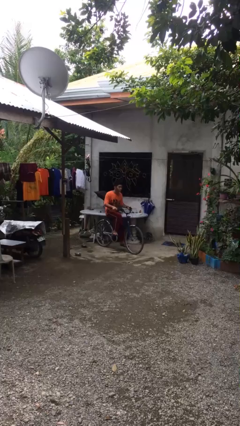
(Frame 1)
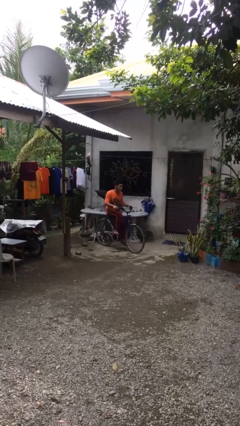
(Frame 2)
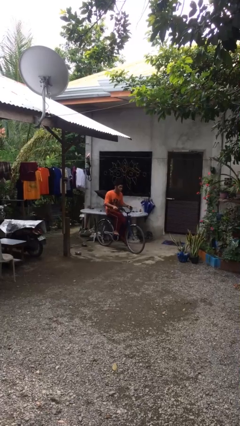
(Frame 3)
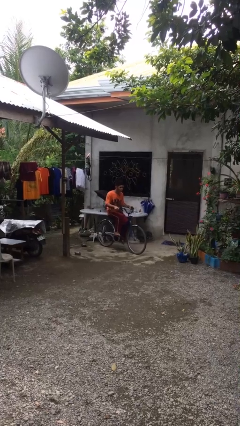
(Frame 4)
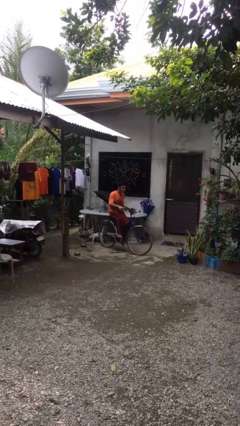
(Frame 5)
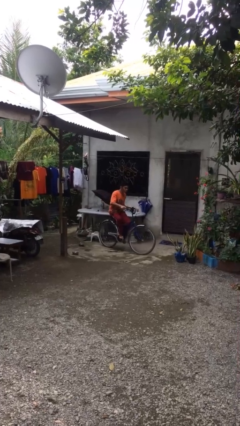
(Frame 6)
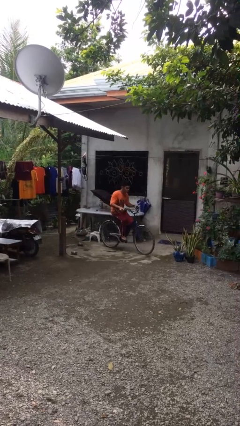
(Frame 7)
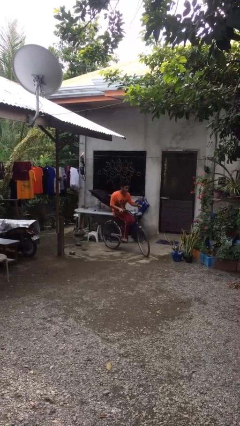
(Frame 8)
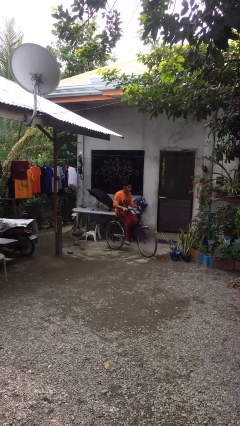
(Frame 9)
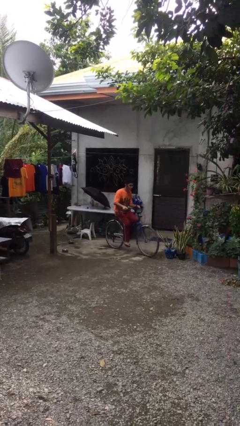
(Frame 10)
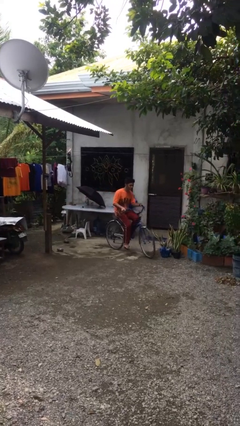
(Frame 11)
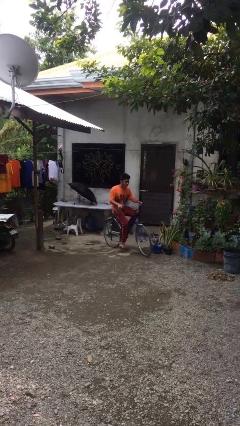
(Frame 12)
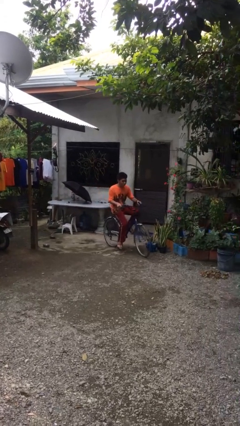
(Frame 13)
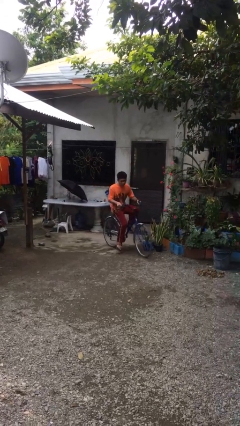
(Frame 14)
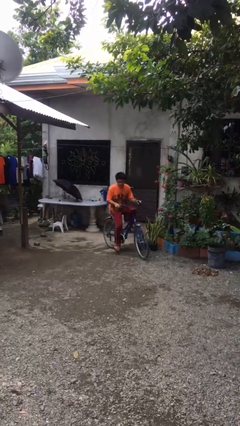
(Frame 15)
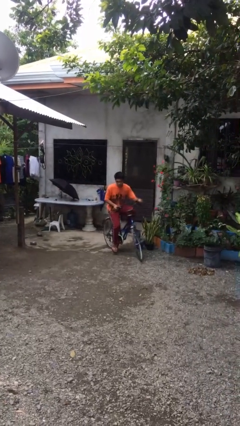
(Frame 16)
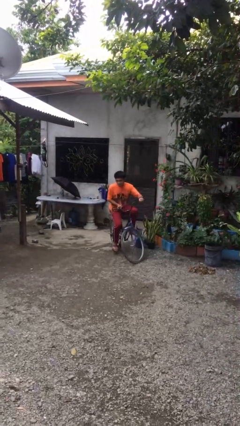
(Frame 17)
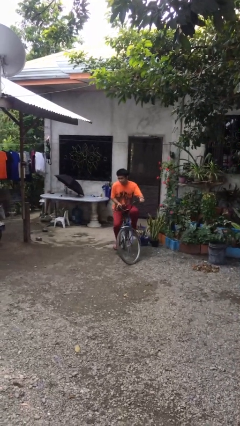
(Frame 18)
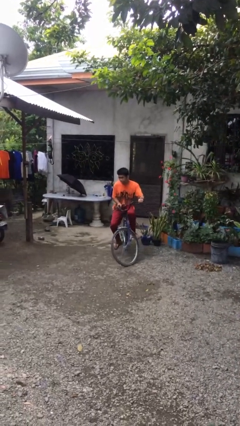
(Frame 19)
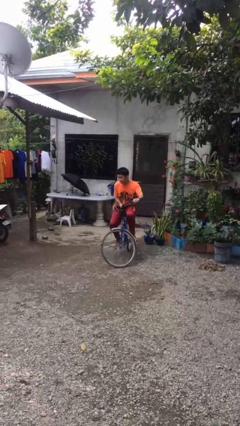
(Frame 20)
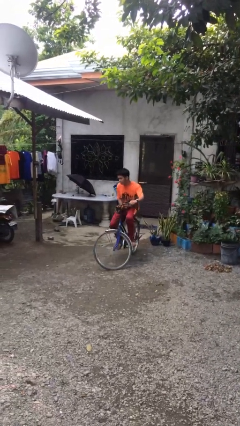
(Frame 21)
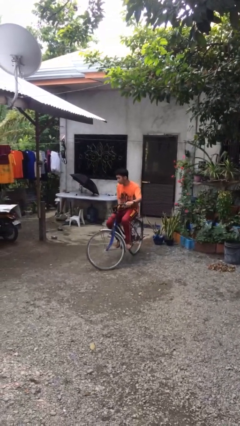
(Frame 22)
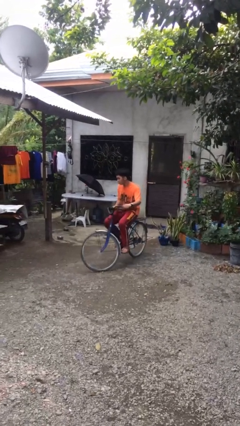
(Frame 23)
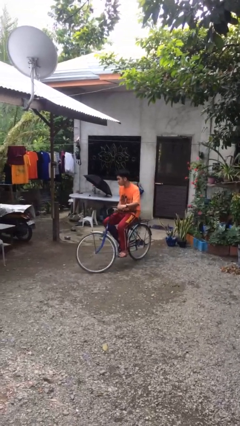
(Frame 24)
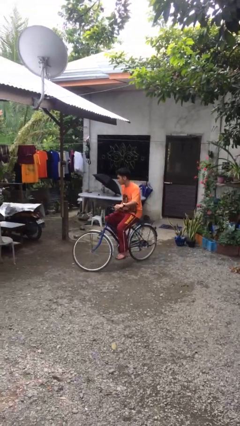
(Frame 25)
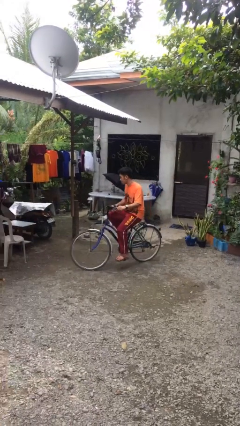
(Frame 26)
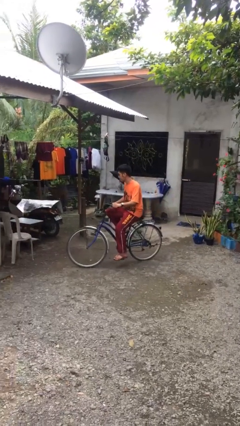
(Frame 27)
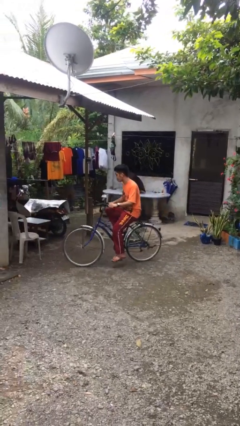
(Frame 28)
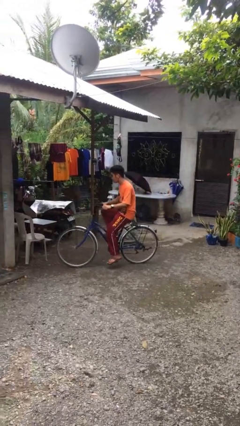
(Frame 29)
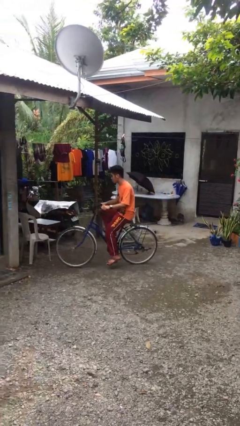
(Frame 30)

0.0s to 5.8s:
person rides bicycle

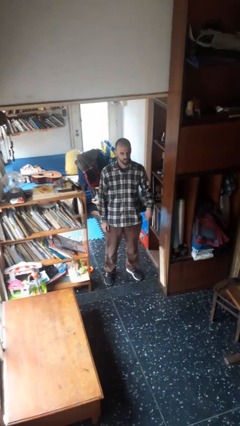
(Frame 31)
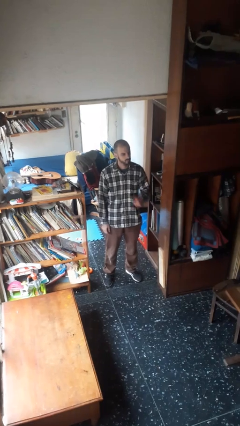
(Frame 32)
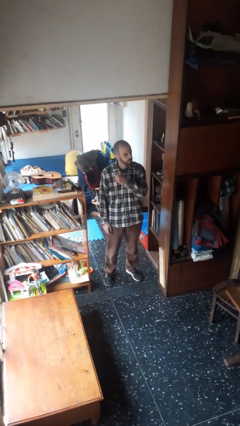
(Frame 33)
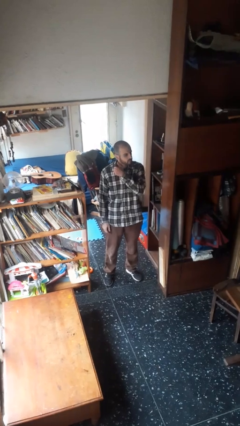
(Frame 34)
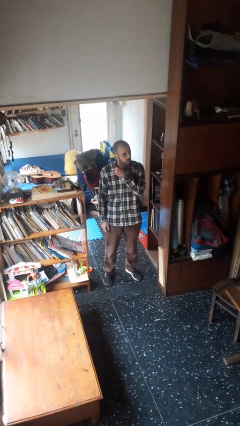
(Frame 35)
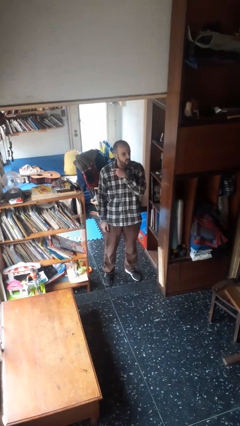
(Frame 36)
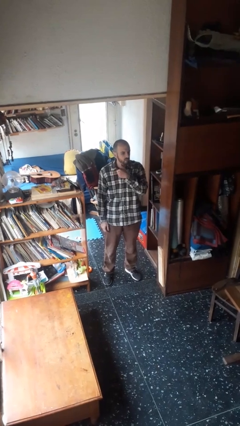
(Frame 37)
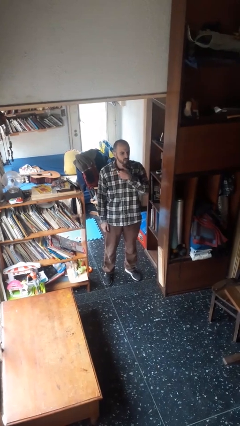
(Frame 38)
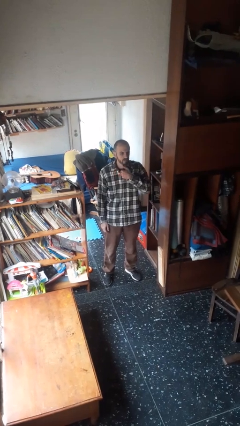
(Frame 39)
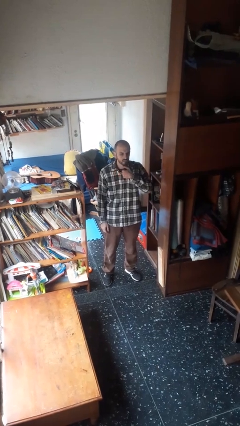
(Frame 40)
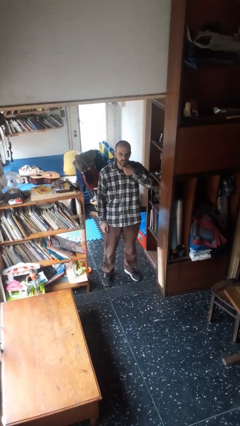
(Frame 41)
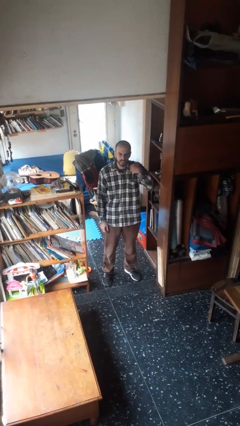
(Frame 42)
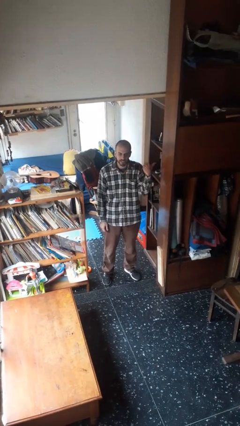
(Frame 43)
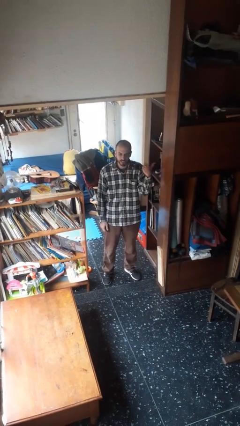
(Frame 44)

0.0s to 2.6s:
person gestures cut

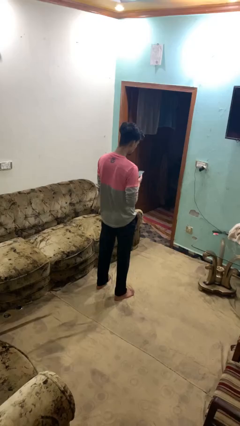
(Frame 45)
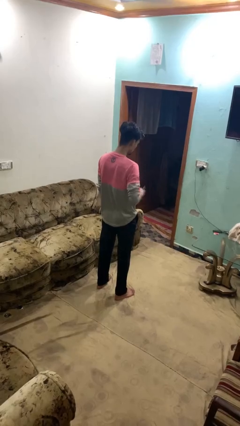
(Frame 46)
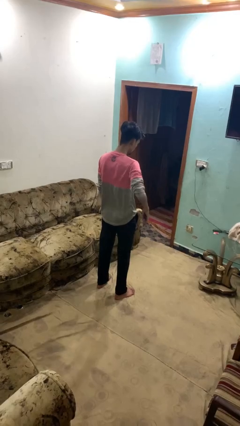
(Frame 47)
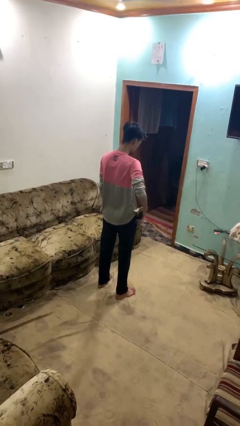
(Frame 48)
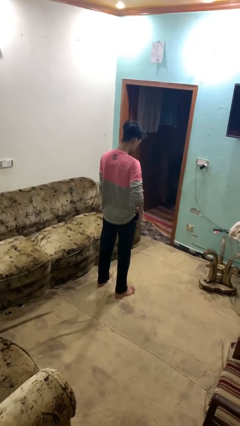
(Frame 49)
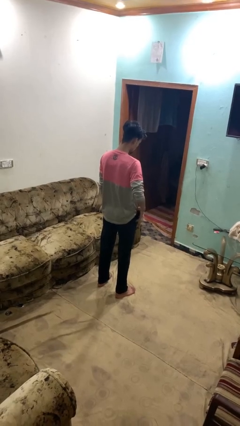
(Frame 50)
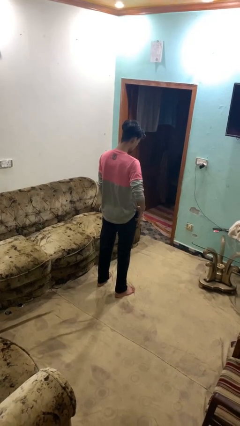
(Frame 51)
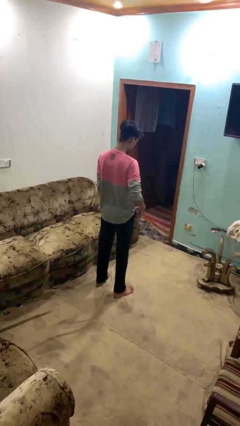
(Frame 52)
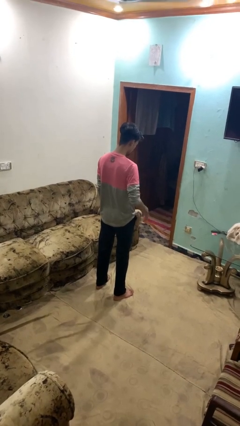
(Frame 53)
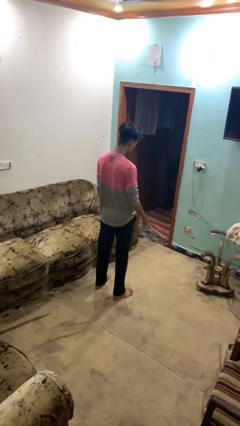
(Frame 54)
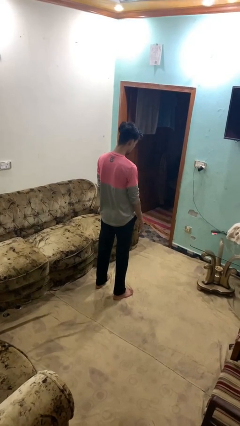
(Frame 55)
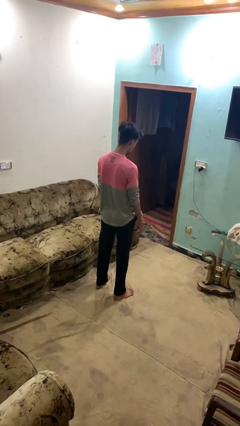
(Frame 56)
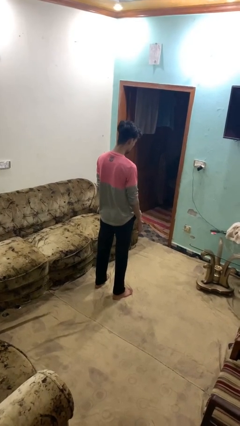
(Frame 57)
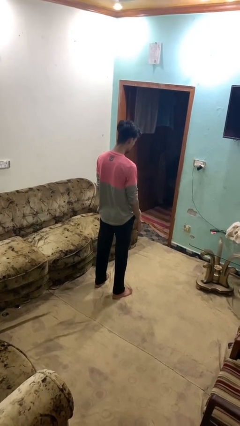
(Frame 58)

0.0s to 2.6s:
person puts phone into pocket

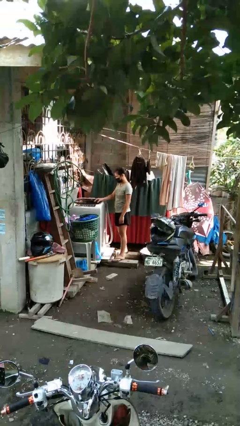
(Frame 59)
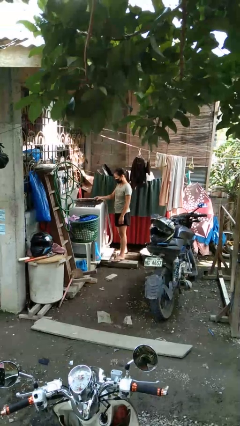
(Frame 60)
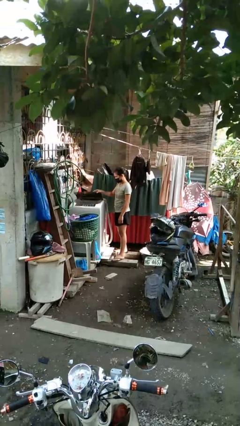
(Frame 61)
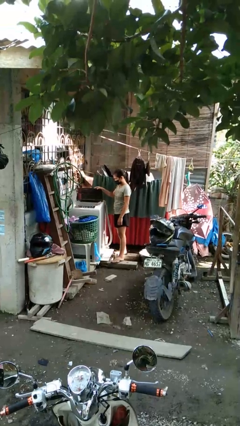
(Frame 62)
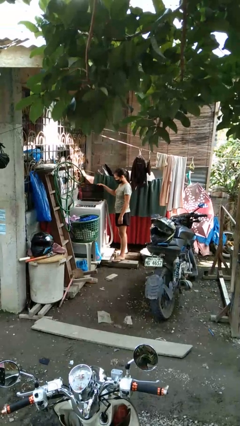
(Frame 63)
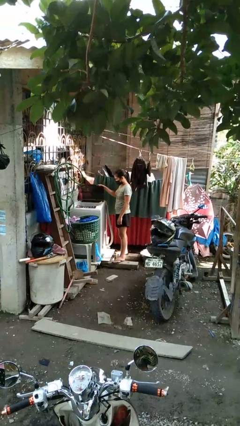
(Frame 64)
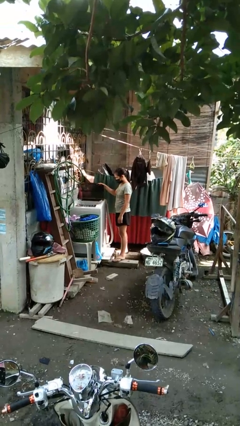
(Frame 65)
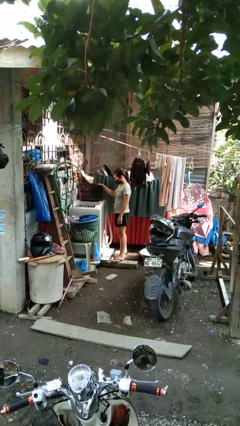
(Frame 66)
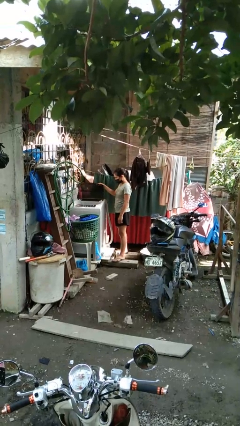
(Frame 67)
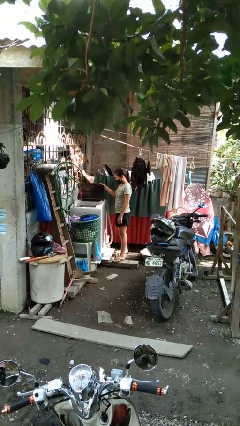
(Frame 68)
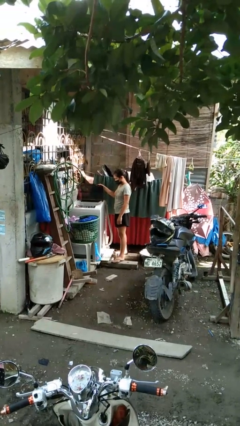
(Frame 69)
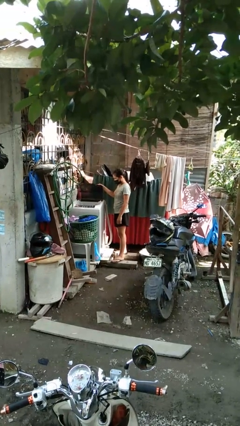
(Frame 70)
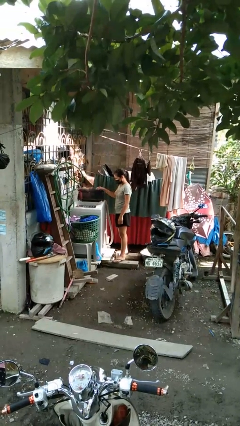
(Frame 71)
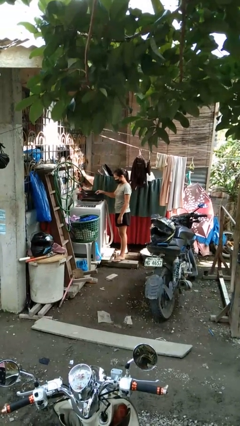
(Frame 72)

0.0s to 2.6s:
person opens clothes washer

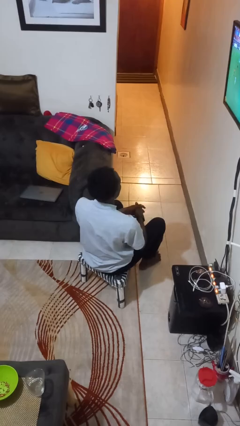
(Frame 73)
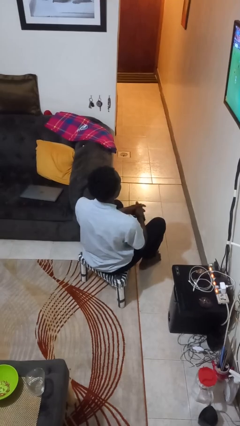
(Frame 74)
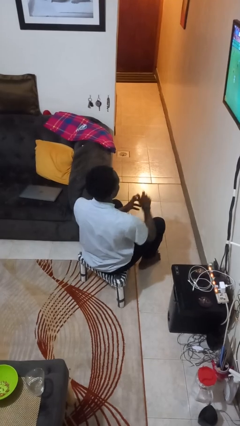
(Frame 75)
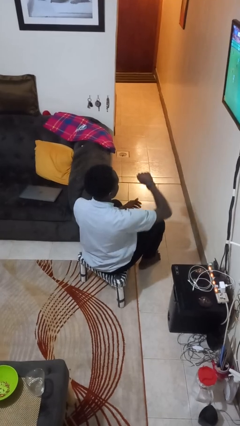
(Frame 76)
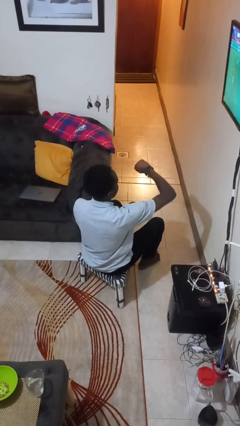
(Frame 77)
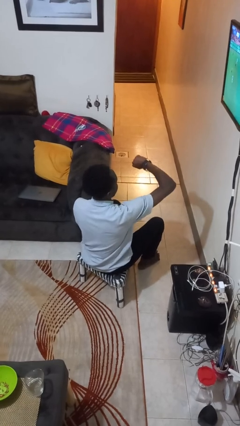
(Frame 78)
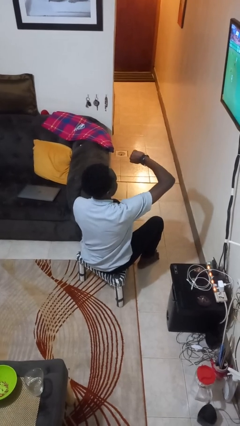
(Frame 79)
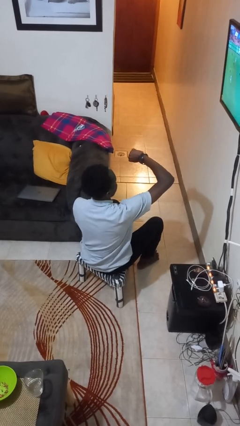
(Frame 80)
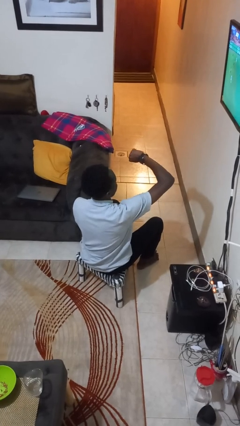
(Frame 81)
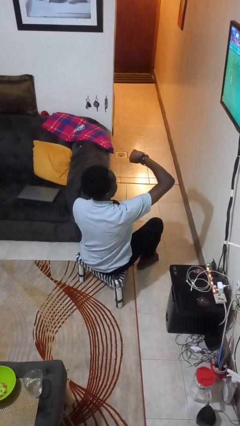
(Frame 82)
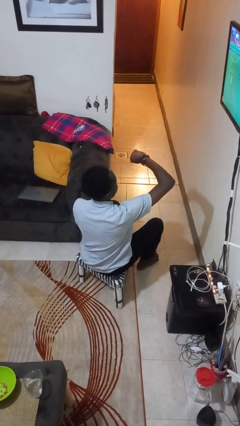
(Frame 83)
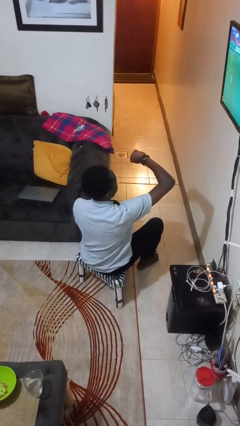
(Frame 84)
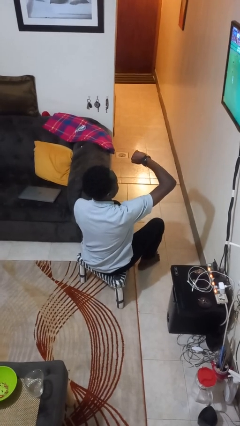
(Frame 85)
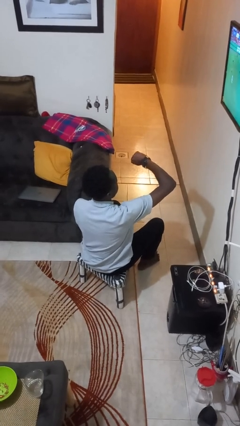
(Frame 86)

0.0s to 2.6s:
person looks at wristwatch

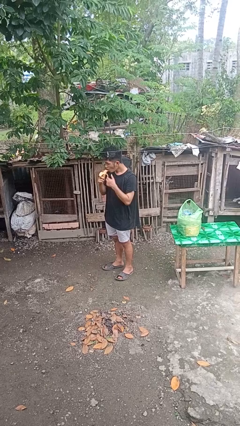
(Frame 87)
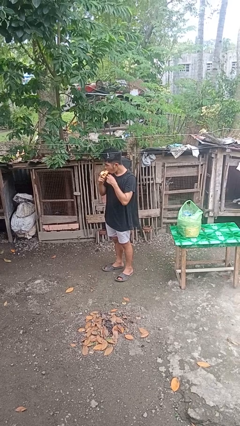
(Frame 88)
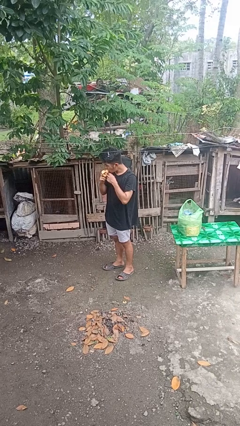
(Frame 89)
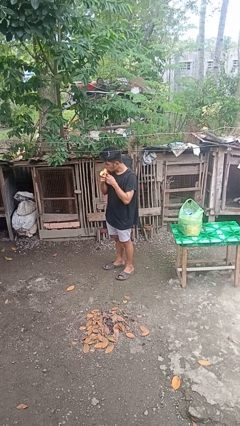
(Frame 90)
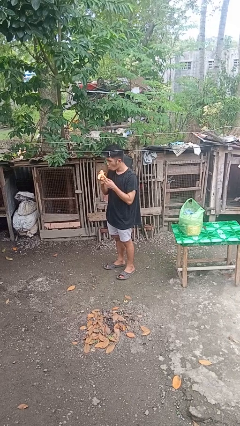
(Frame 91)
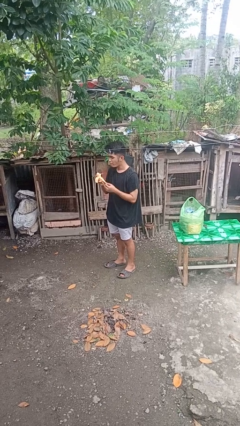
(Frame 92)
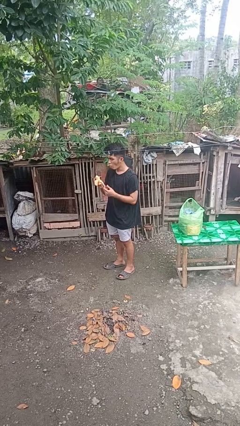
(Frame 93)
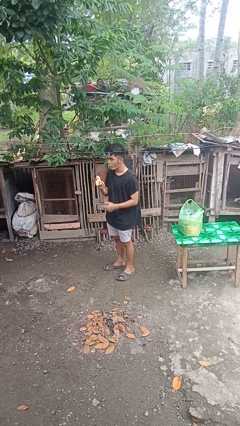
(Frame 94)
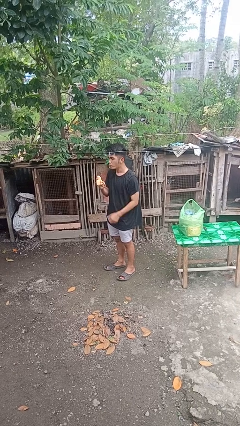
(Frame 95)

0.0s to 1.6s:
person eats banana
